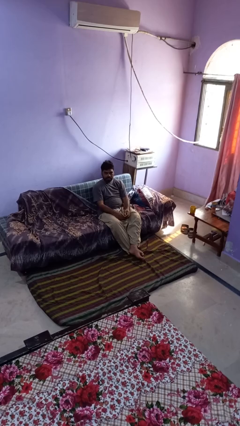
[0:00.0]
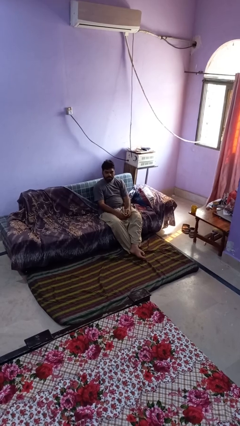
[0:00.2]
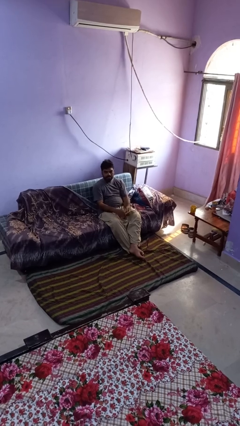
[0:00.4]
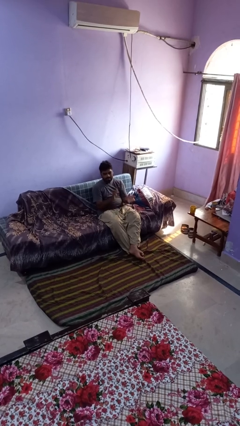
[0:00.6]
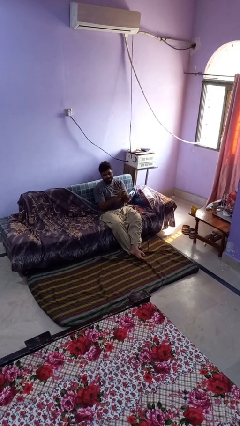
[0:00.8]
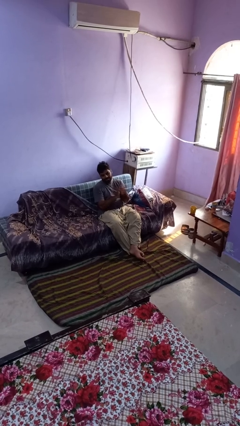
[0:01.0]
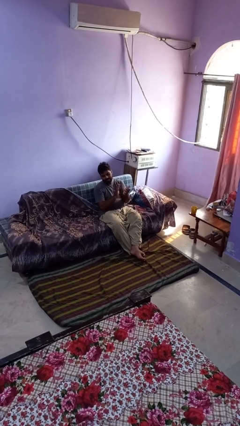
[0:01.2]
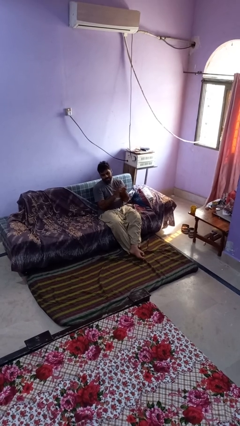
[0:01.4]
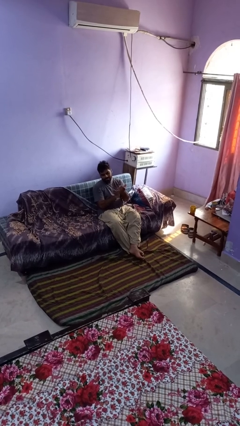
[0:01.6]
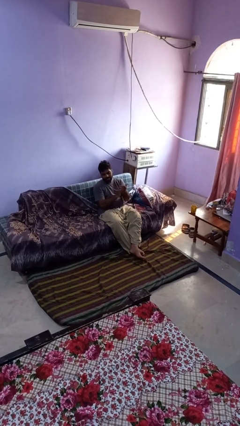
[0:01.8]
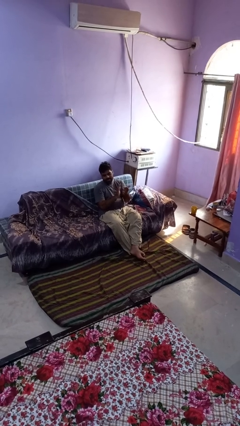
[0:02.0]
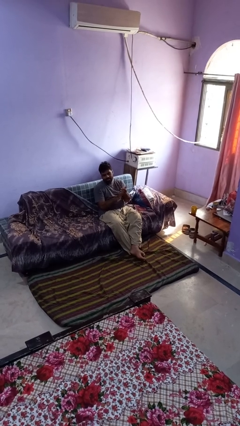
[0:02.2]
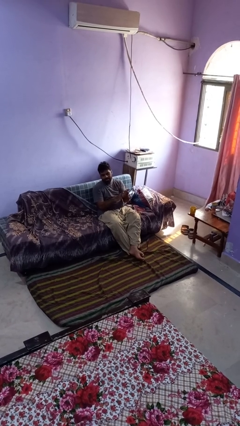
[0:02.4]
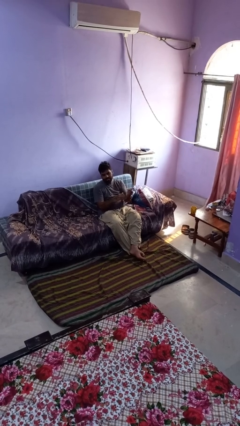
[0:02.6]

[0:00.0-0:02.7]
person claps hands

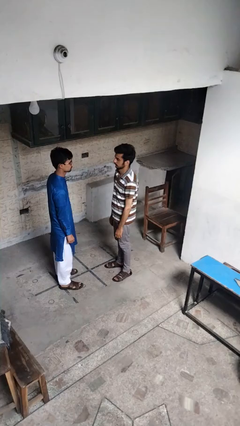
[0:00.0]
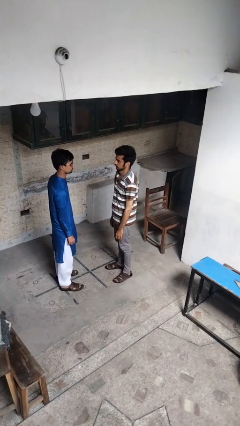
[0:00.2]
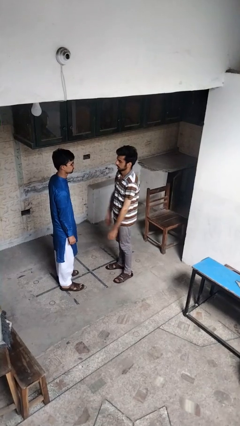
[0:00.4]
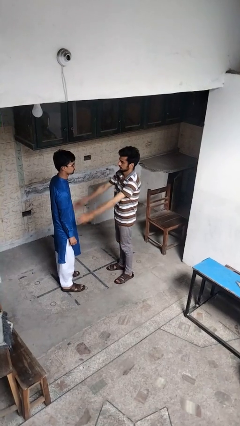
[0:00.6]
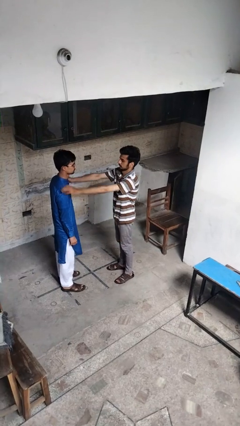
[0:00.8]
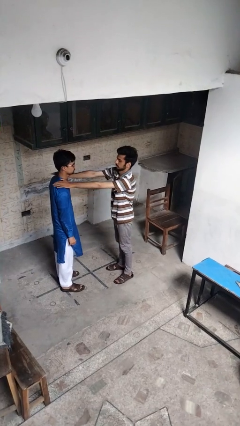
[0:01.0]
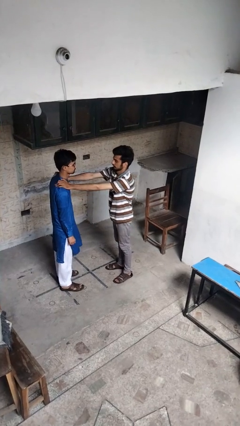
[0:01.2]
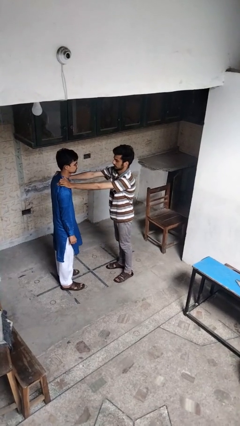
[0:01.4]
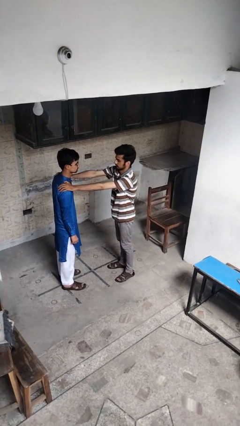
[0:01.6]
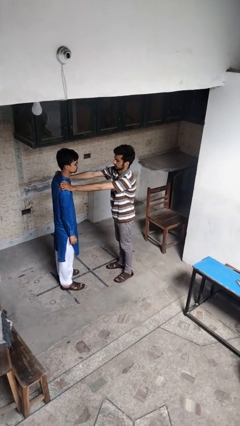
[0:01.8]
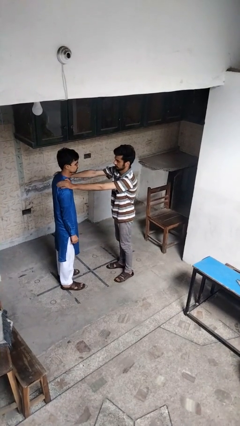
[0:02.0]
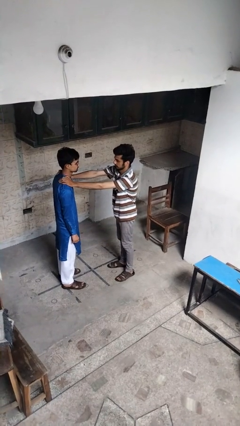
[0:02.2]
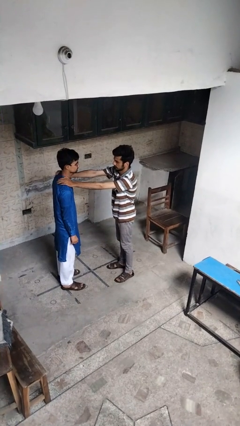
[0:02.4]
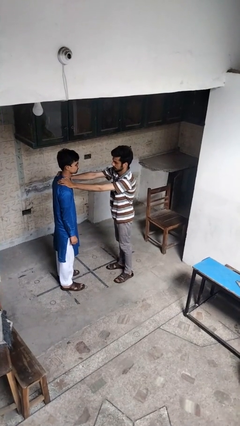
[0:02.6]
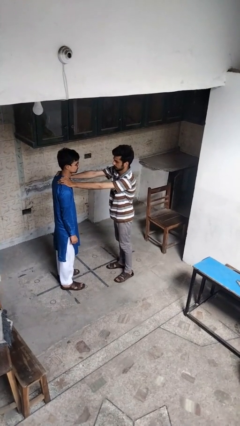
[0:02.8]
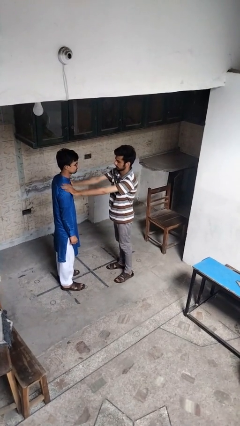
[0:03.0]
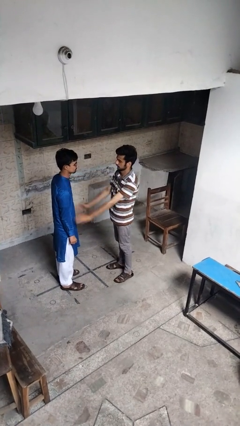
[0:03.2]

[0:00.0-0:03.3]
person pounds shoulders of person

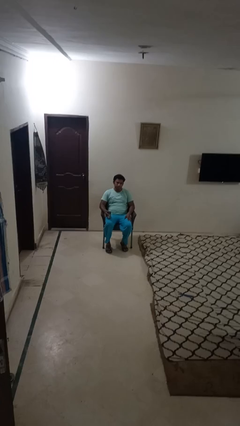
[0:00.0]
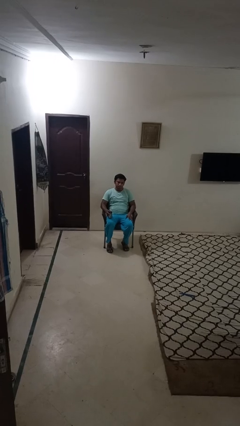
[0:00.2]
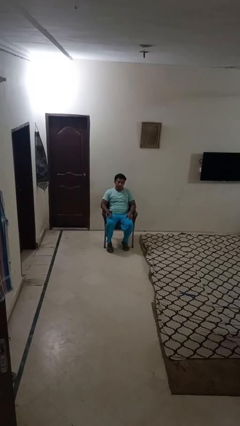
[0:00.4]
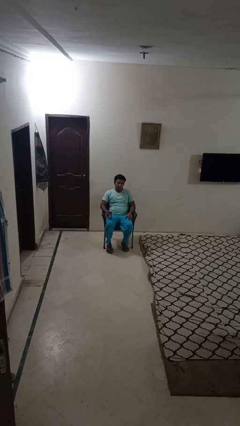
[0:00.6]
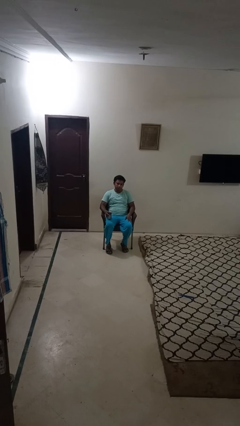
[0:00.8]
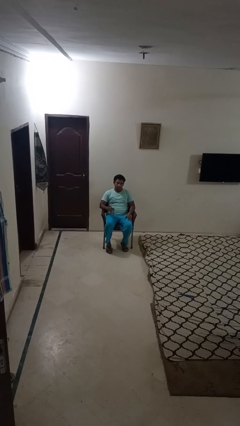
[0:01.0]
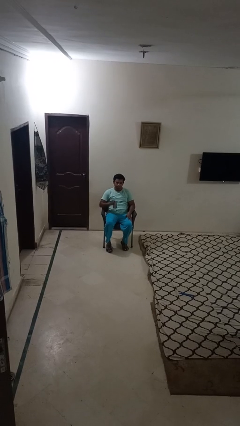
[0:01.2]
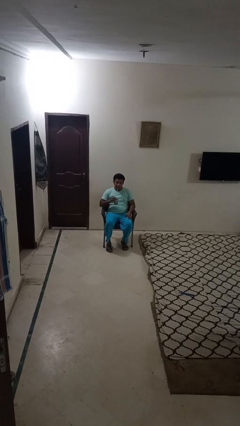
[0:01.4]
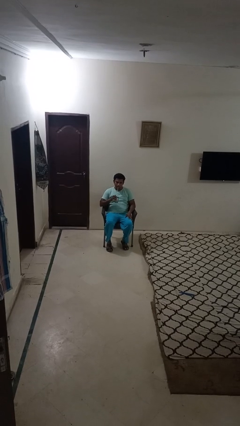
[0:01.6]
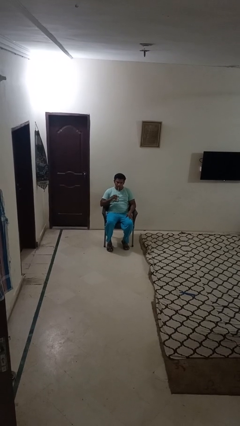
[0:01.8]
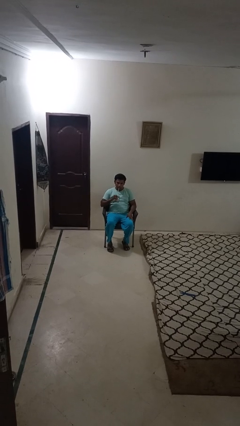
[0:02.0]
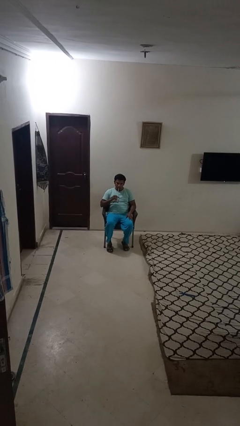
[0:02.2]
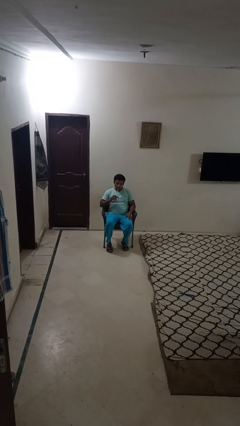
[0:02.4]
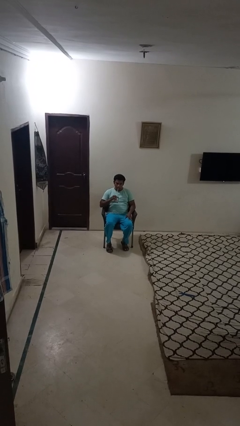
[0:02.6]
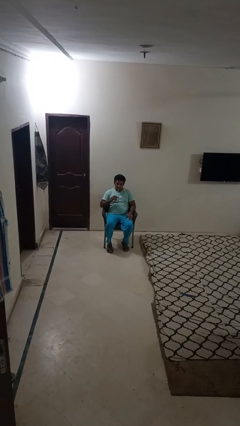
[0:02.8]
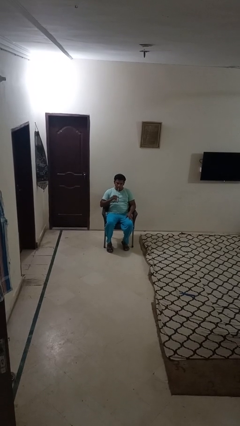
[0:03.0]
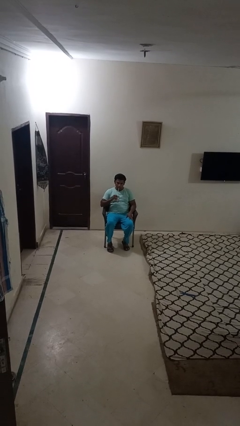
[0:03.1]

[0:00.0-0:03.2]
person drinks from straw

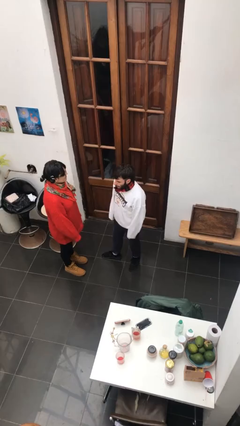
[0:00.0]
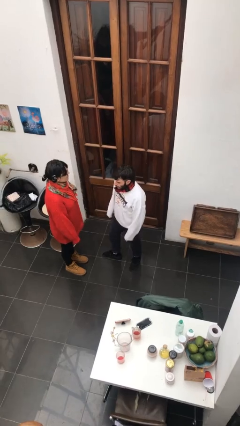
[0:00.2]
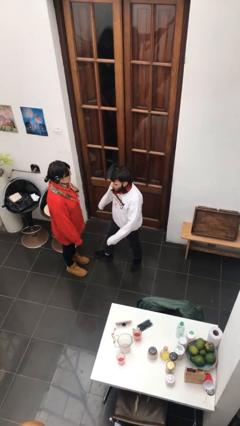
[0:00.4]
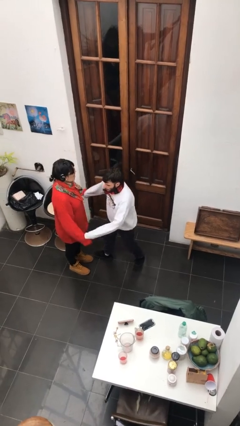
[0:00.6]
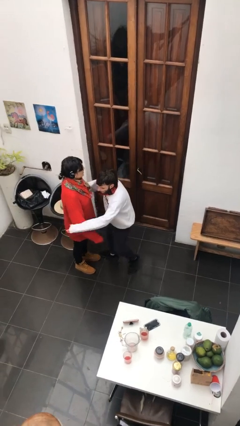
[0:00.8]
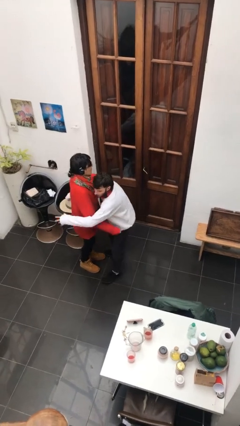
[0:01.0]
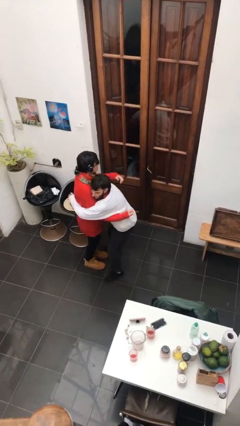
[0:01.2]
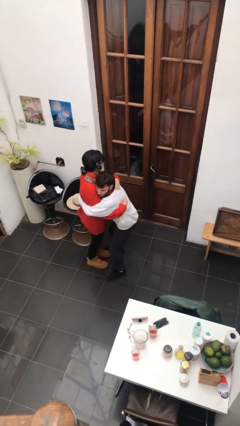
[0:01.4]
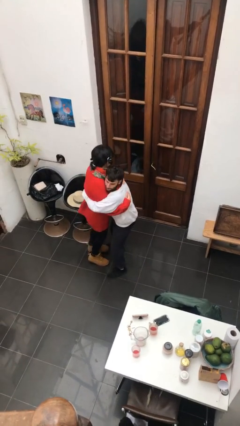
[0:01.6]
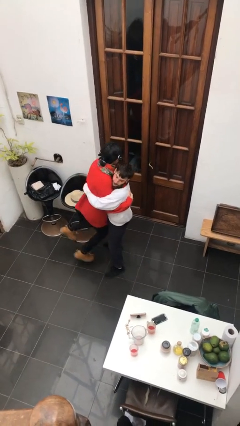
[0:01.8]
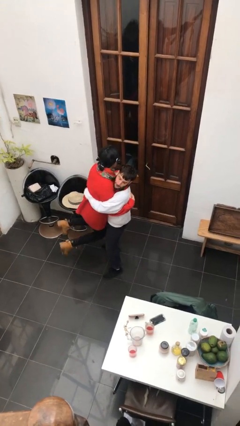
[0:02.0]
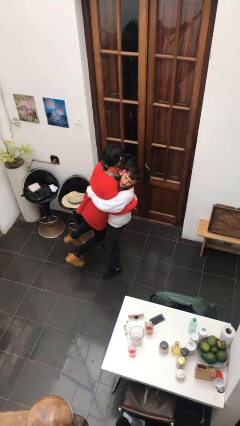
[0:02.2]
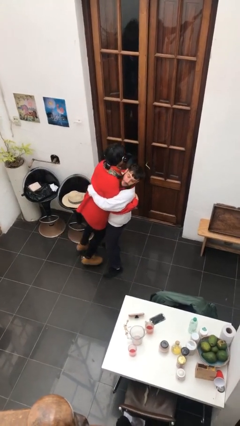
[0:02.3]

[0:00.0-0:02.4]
person picks up person

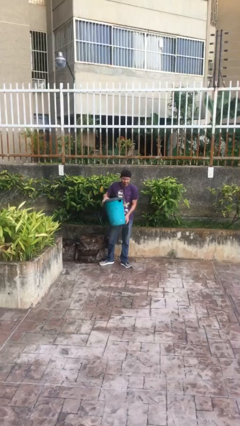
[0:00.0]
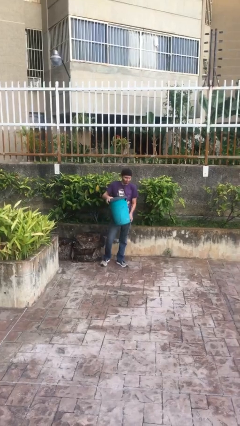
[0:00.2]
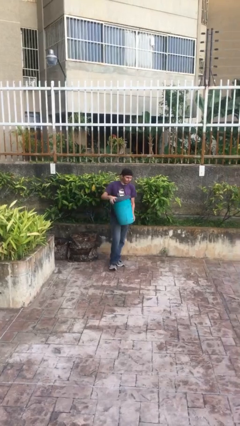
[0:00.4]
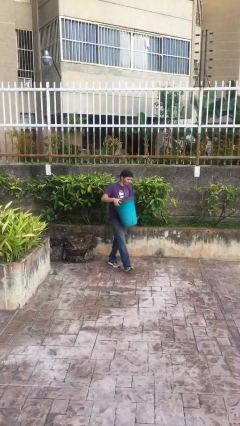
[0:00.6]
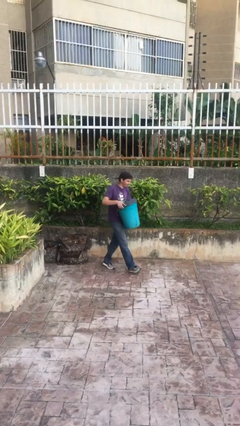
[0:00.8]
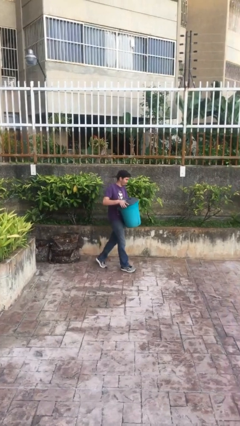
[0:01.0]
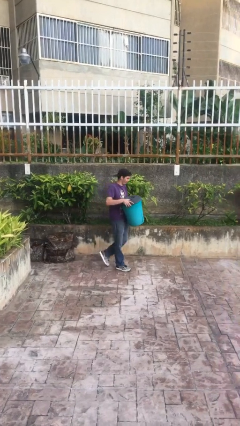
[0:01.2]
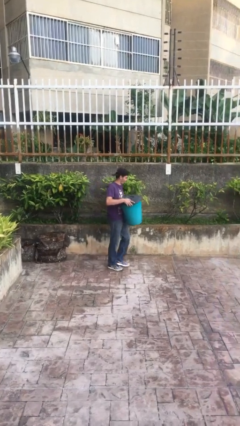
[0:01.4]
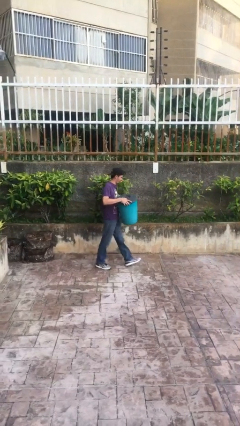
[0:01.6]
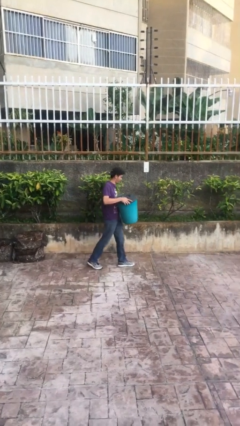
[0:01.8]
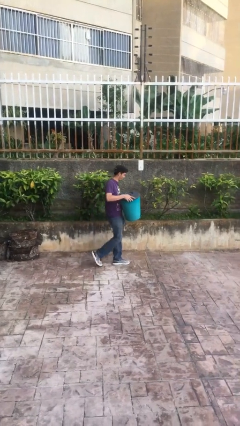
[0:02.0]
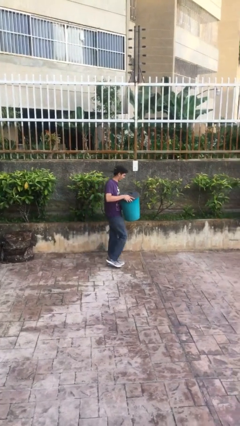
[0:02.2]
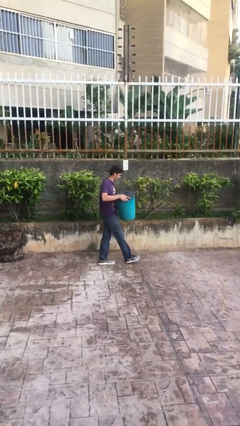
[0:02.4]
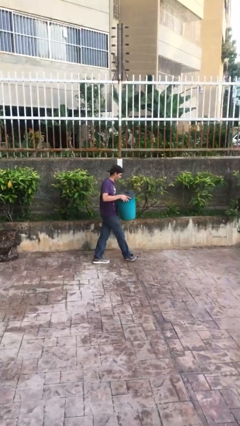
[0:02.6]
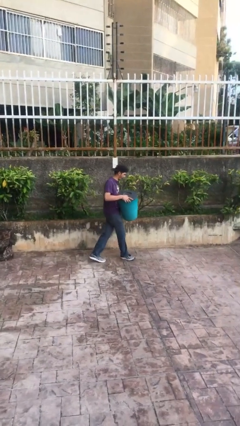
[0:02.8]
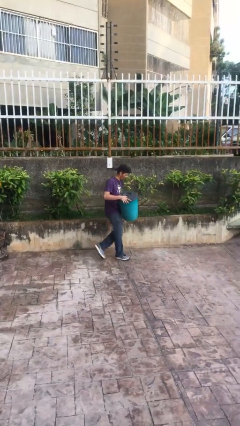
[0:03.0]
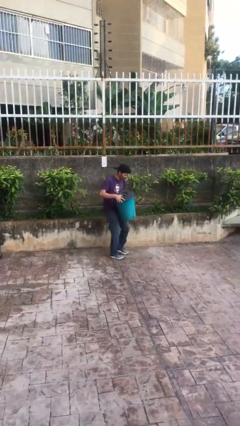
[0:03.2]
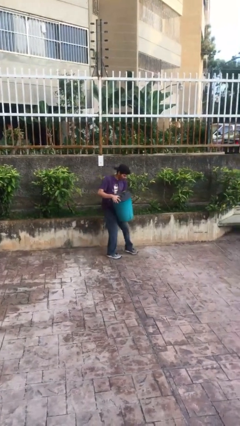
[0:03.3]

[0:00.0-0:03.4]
person carries heavy object

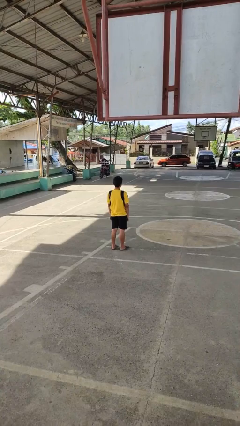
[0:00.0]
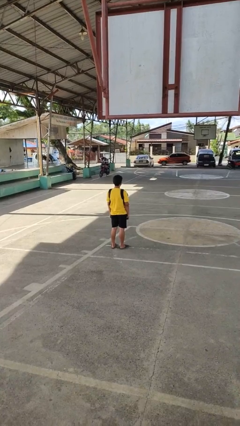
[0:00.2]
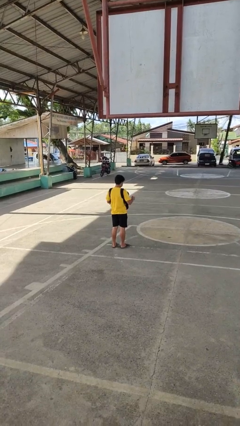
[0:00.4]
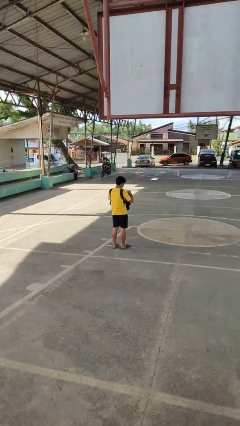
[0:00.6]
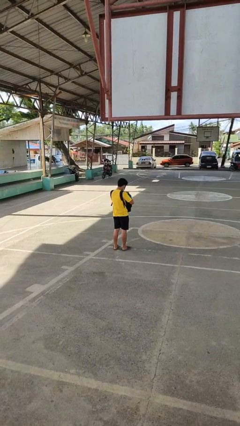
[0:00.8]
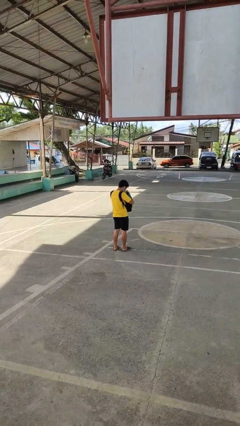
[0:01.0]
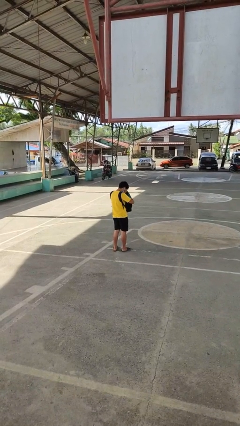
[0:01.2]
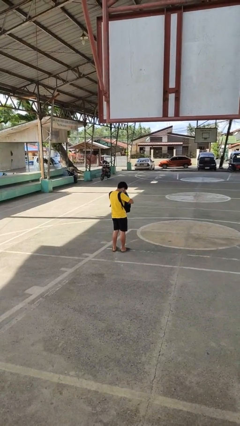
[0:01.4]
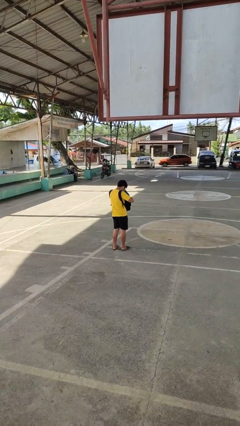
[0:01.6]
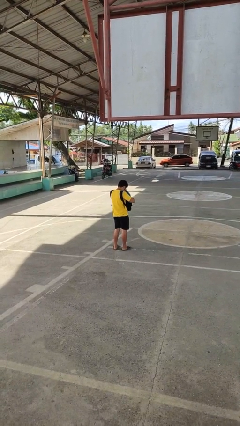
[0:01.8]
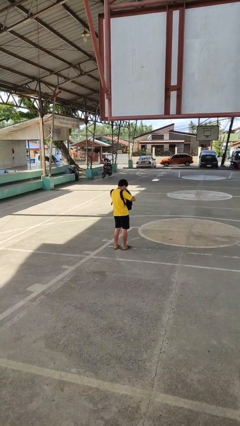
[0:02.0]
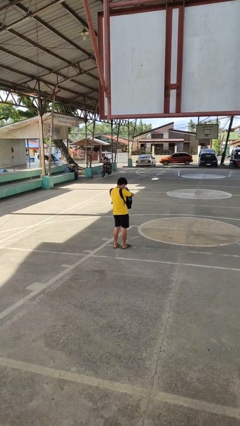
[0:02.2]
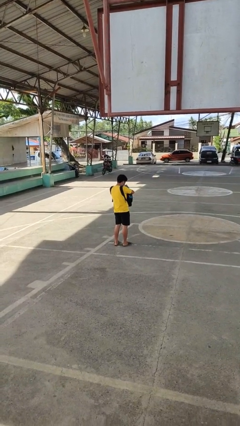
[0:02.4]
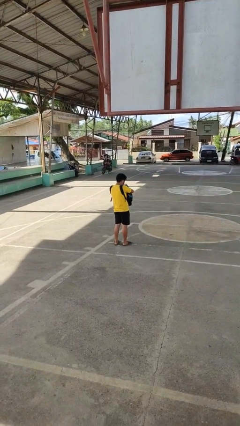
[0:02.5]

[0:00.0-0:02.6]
person searches in backpack
